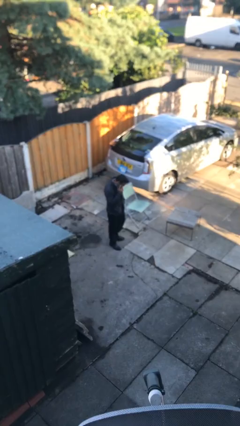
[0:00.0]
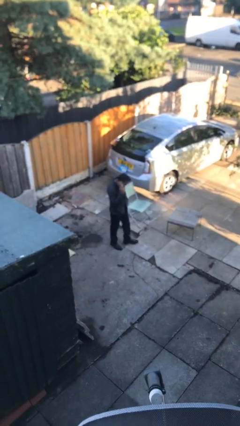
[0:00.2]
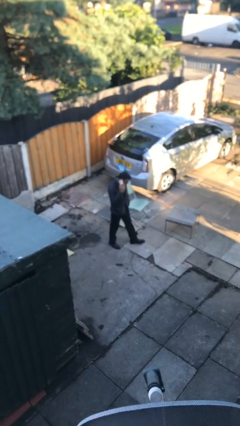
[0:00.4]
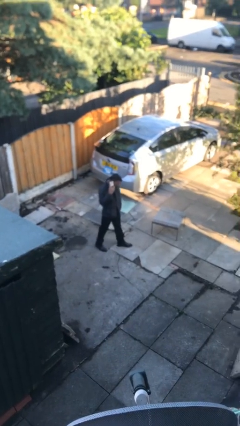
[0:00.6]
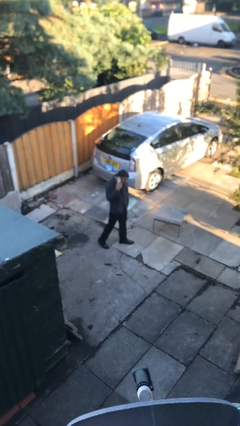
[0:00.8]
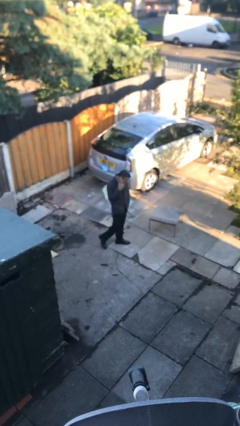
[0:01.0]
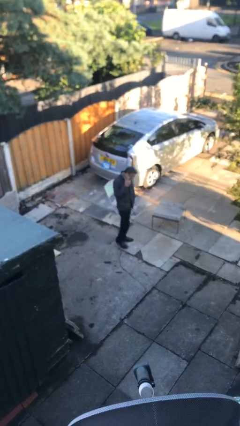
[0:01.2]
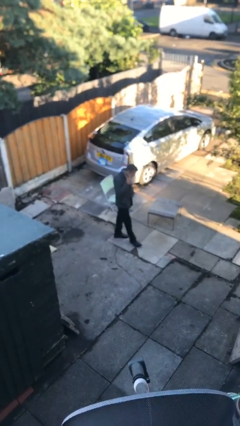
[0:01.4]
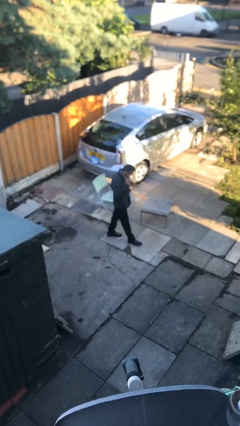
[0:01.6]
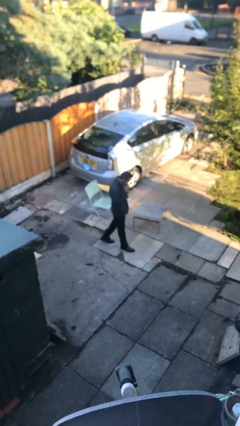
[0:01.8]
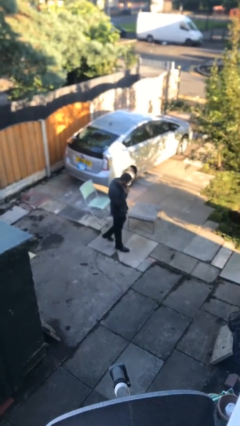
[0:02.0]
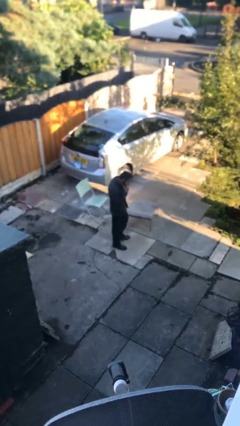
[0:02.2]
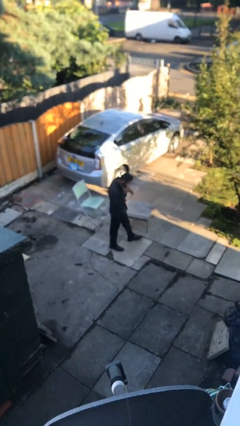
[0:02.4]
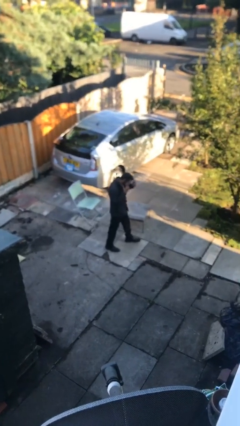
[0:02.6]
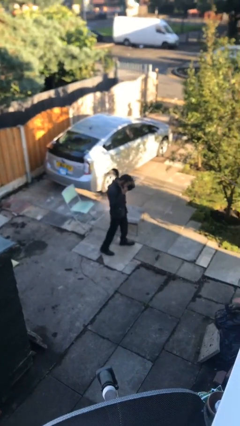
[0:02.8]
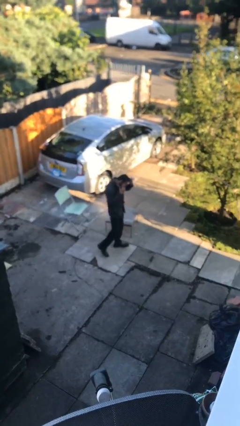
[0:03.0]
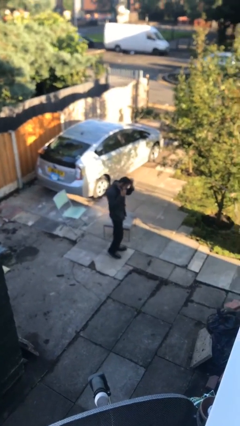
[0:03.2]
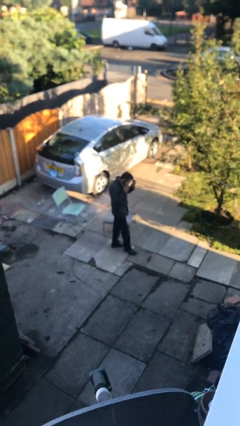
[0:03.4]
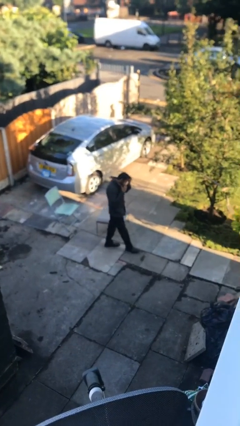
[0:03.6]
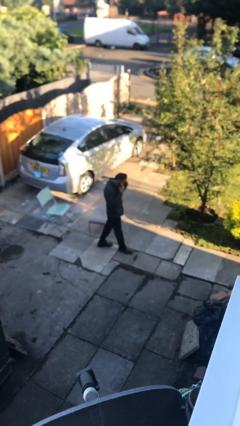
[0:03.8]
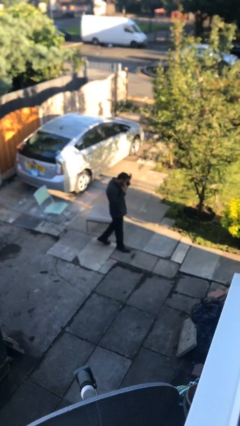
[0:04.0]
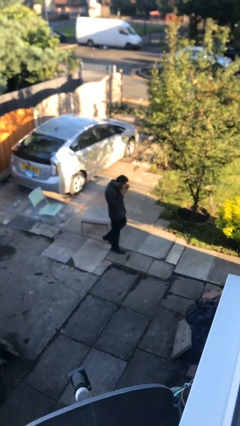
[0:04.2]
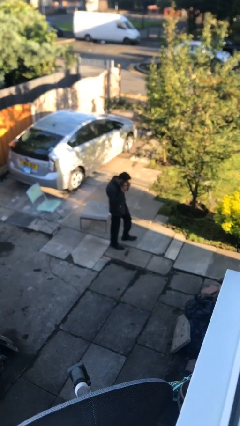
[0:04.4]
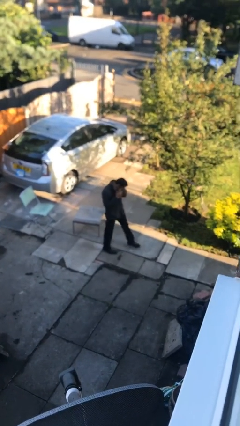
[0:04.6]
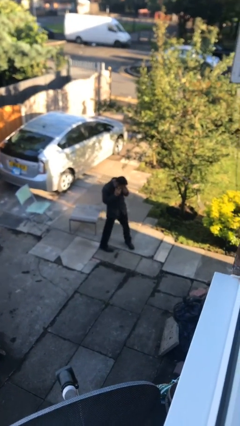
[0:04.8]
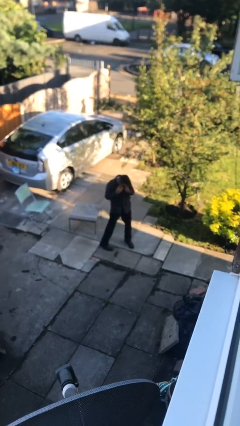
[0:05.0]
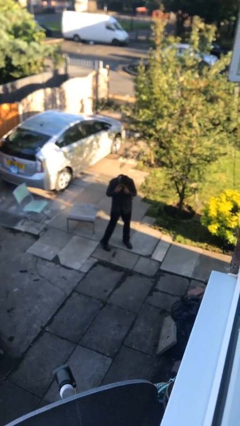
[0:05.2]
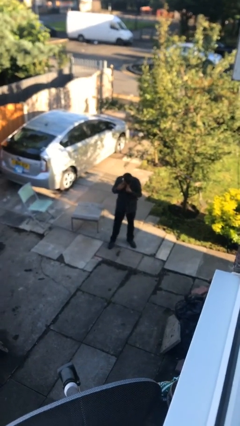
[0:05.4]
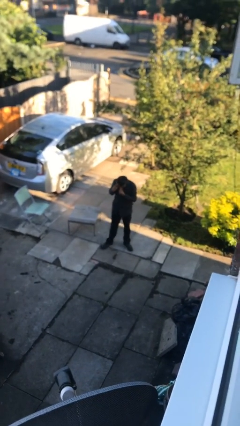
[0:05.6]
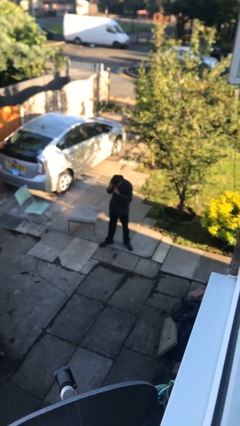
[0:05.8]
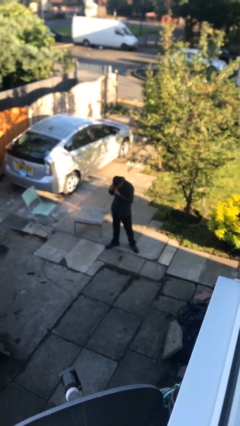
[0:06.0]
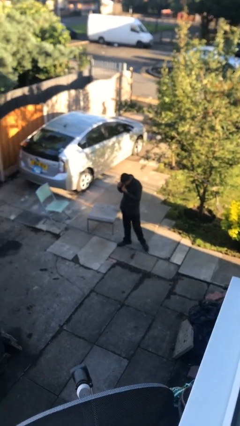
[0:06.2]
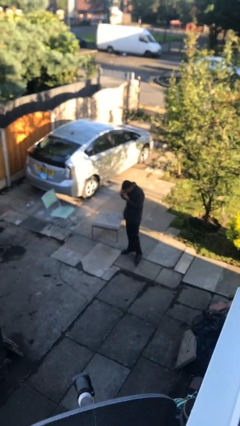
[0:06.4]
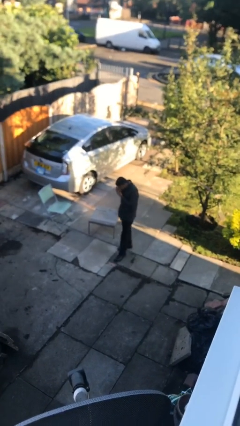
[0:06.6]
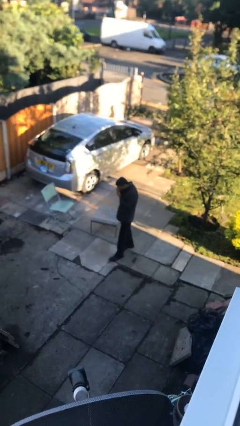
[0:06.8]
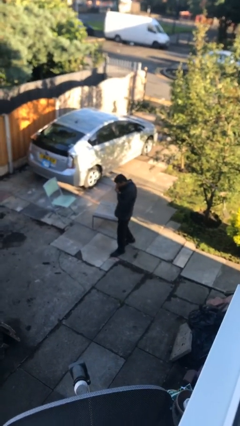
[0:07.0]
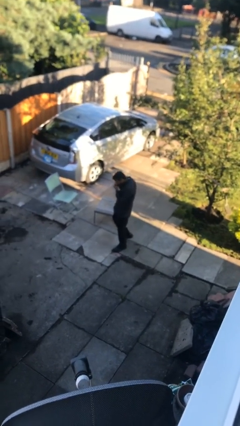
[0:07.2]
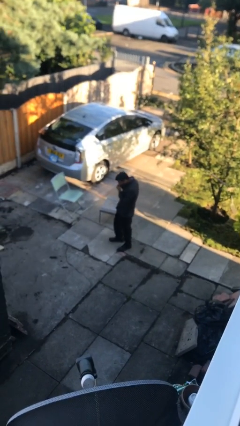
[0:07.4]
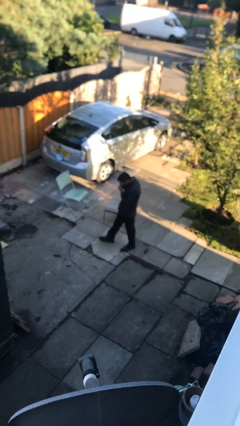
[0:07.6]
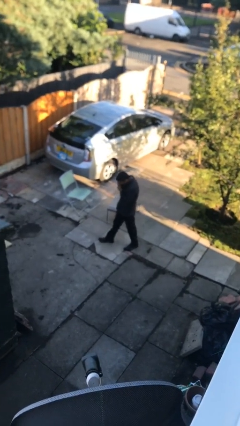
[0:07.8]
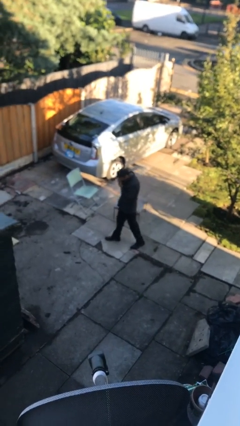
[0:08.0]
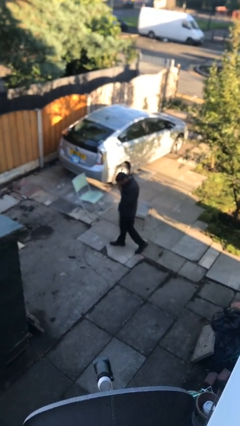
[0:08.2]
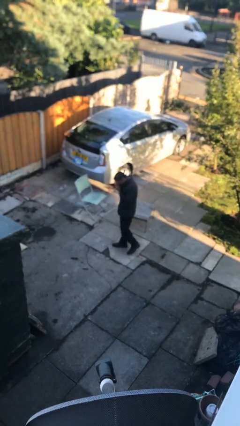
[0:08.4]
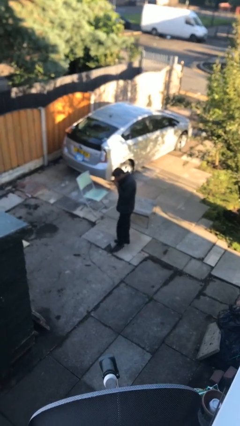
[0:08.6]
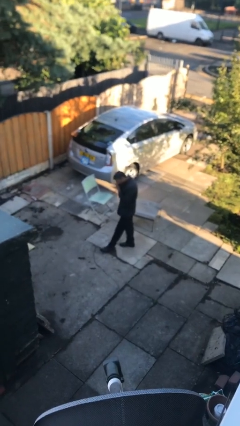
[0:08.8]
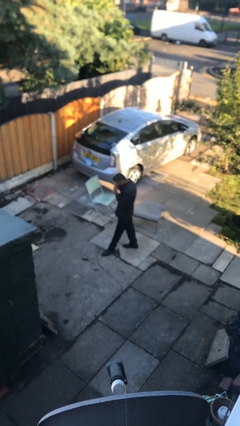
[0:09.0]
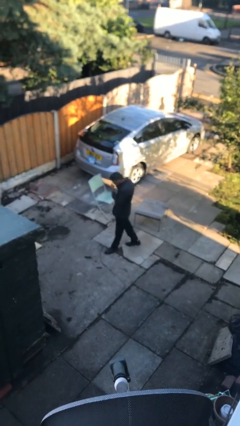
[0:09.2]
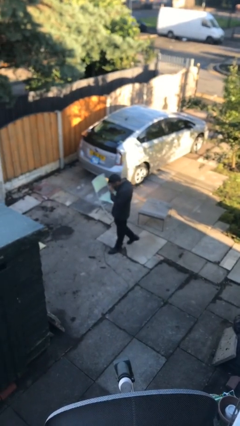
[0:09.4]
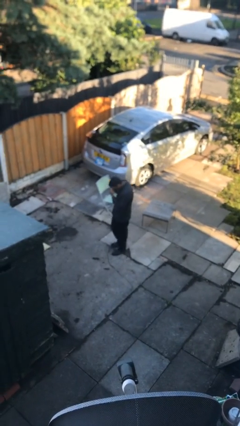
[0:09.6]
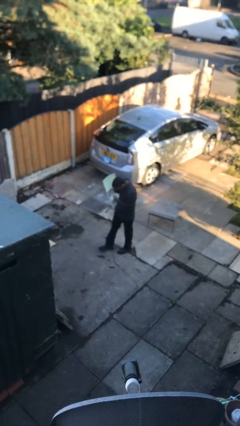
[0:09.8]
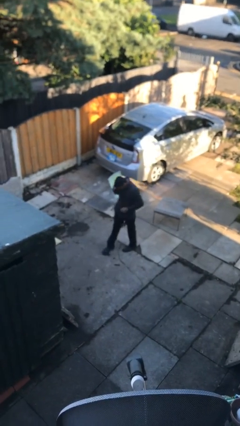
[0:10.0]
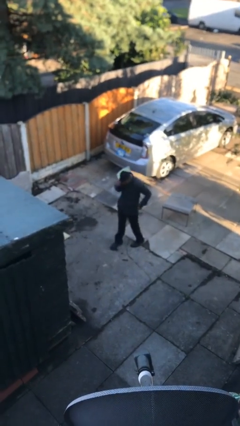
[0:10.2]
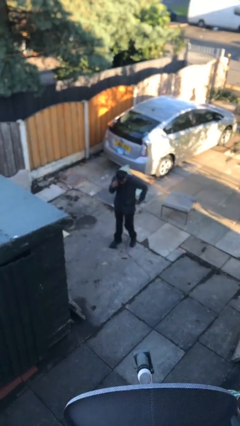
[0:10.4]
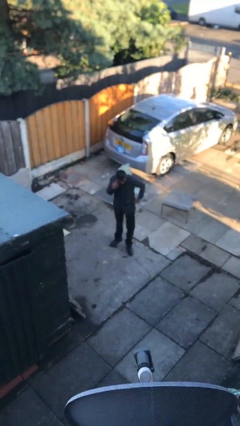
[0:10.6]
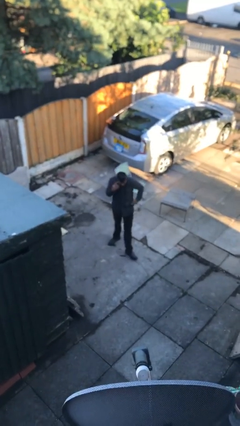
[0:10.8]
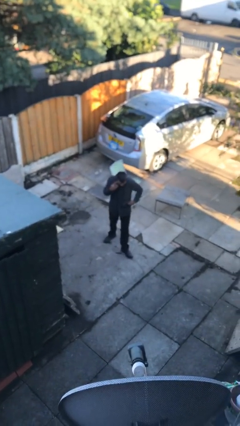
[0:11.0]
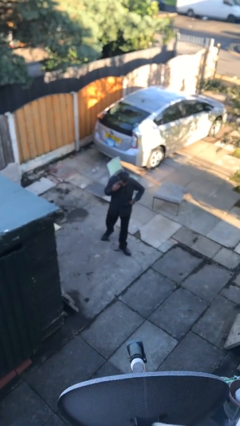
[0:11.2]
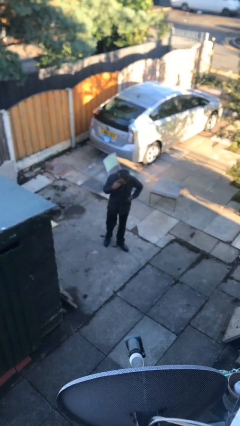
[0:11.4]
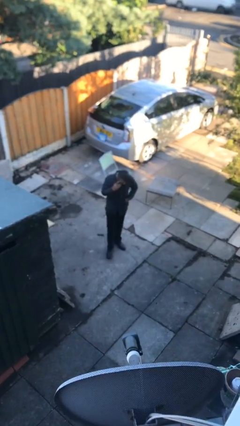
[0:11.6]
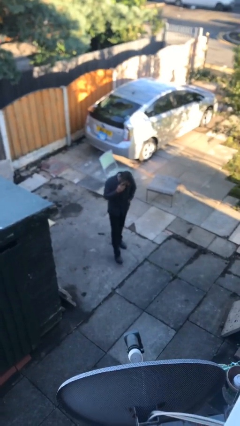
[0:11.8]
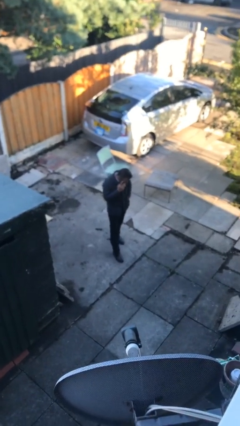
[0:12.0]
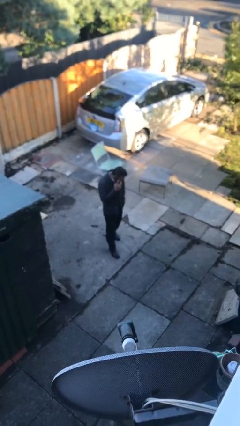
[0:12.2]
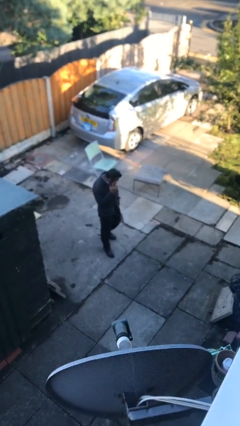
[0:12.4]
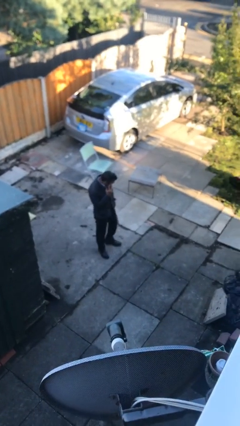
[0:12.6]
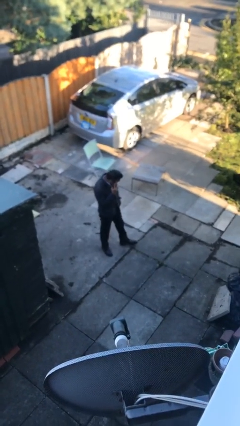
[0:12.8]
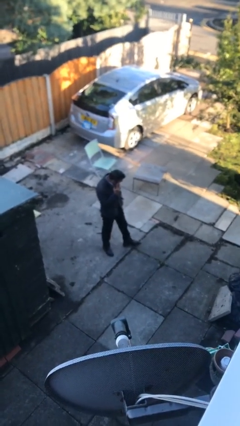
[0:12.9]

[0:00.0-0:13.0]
person talks on phone

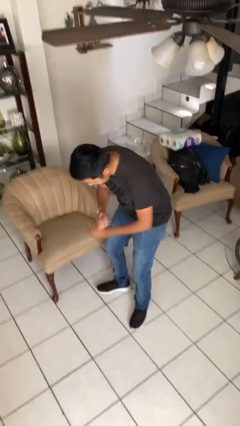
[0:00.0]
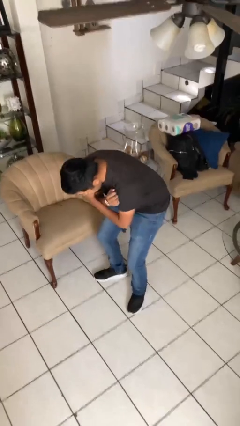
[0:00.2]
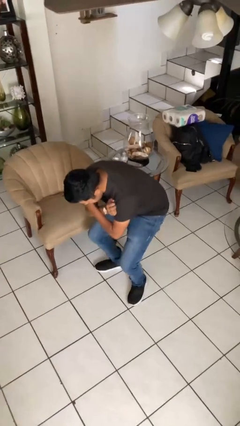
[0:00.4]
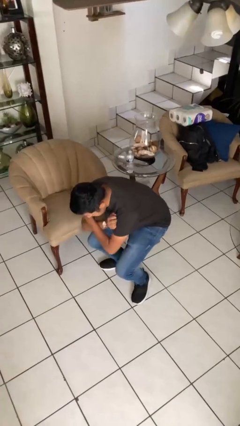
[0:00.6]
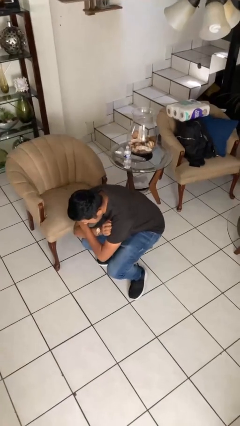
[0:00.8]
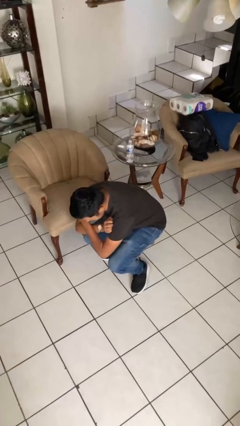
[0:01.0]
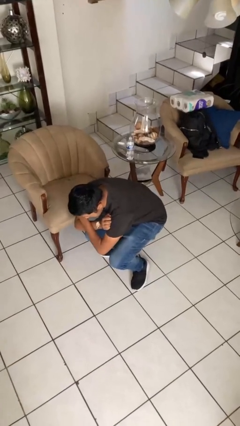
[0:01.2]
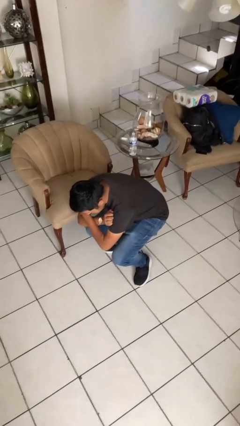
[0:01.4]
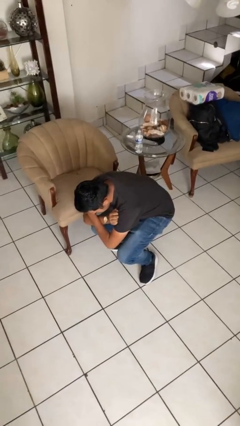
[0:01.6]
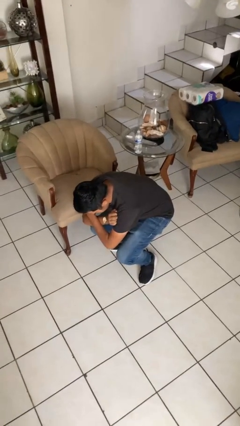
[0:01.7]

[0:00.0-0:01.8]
person squats

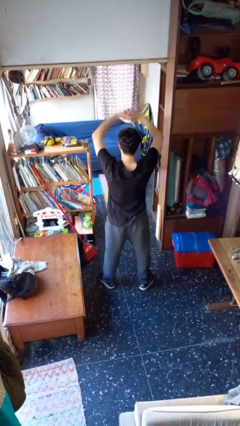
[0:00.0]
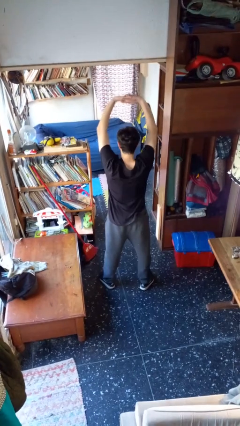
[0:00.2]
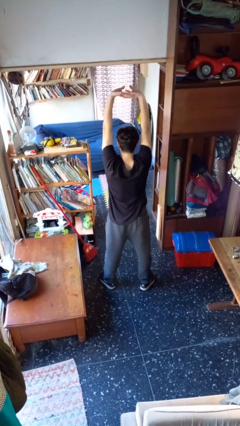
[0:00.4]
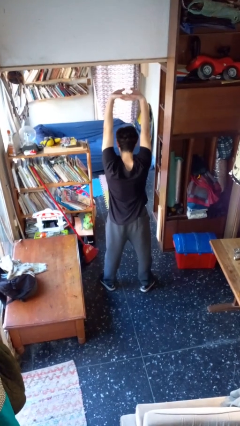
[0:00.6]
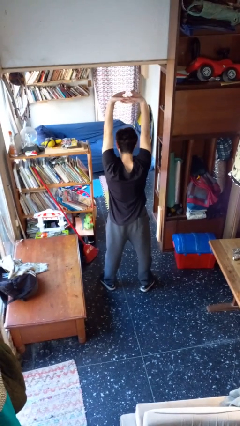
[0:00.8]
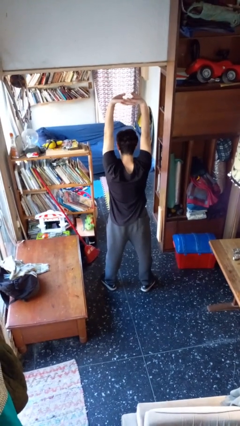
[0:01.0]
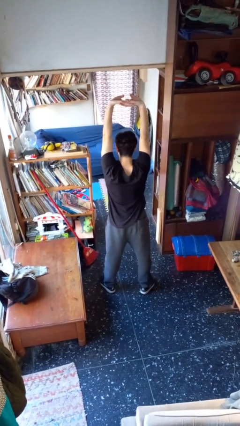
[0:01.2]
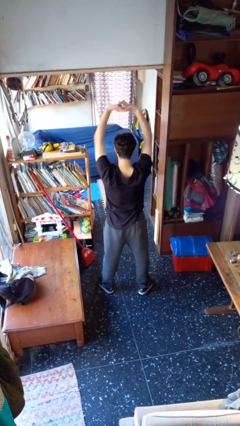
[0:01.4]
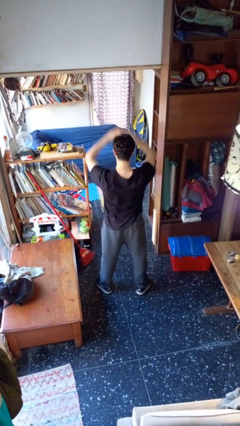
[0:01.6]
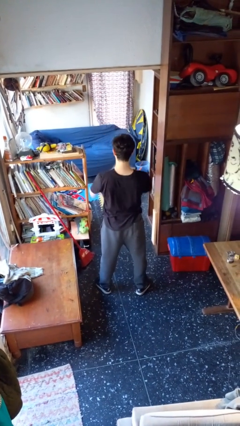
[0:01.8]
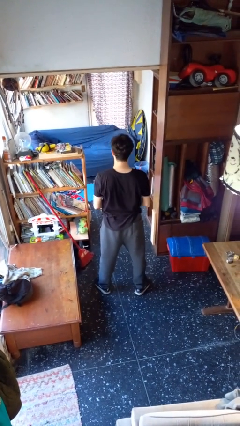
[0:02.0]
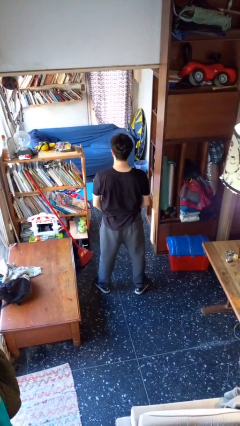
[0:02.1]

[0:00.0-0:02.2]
person stretches arms over head

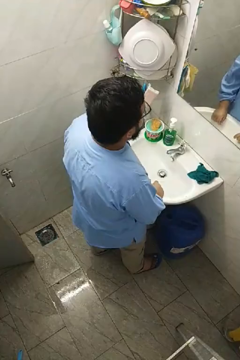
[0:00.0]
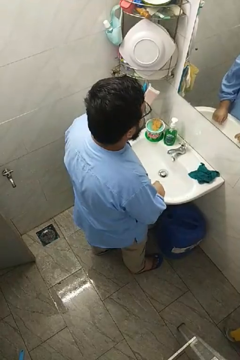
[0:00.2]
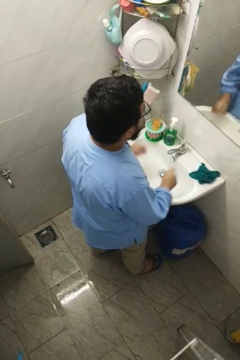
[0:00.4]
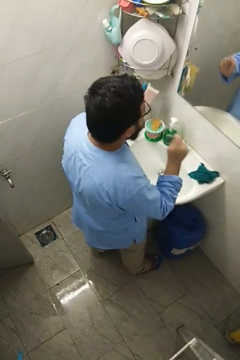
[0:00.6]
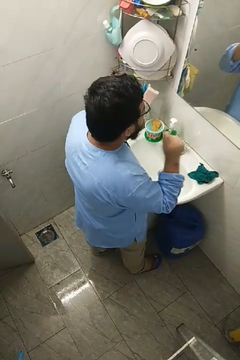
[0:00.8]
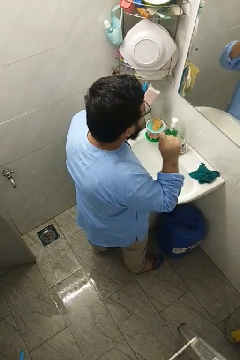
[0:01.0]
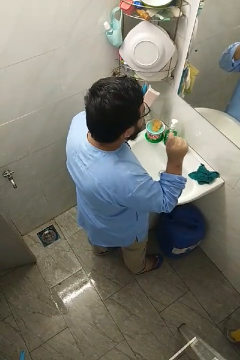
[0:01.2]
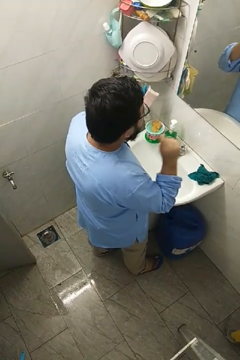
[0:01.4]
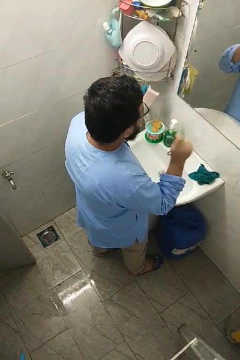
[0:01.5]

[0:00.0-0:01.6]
person flosses
